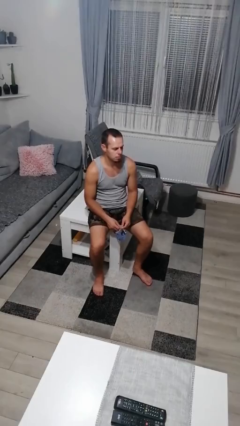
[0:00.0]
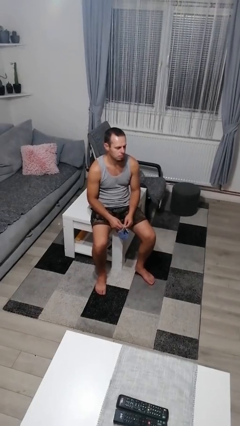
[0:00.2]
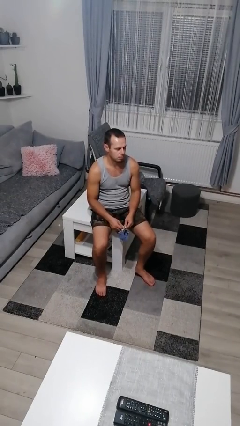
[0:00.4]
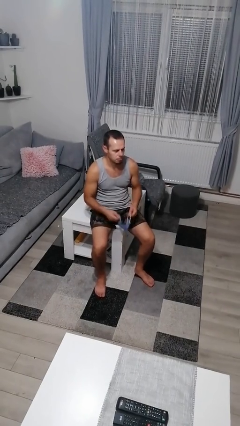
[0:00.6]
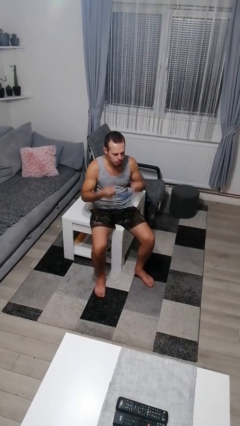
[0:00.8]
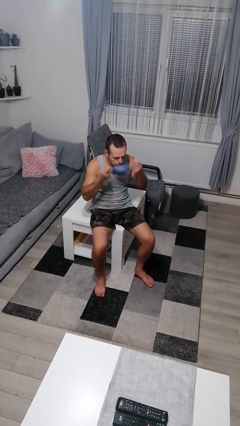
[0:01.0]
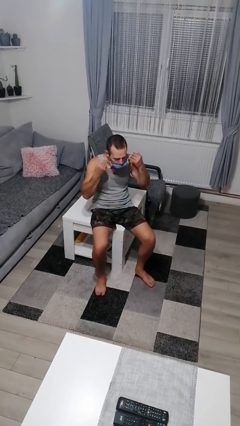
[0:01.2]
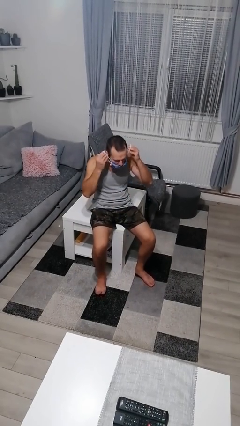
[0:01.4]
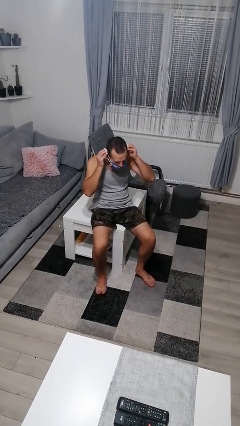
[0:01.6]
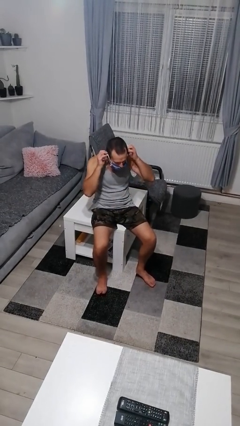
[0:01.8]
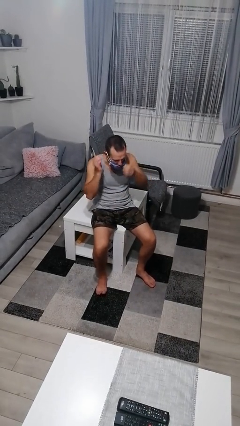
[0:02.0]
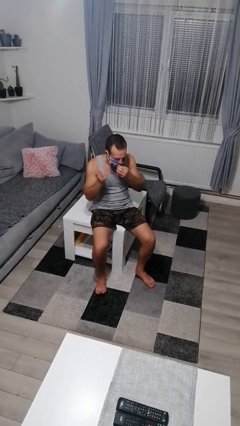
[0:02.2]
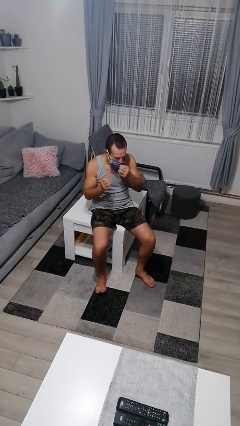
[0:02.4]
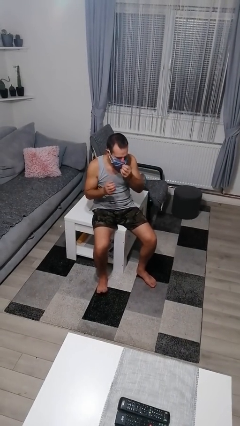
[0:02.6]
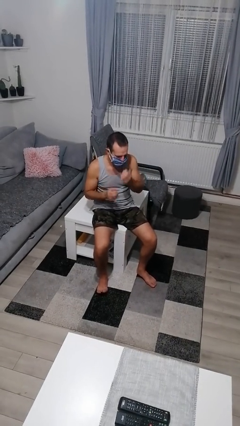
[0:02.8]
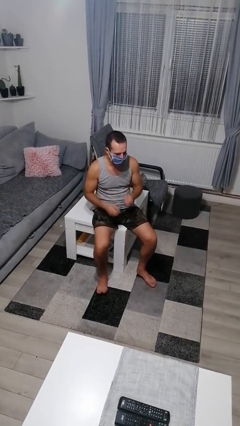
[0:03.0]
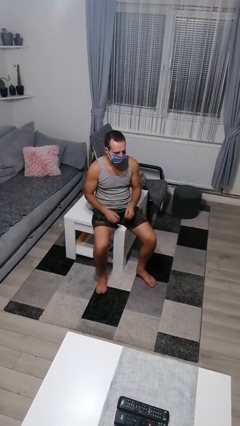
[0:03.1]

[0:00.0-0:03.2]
person puts on facemask

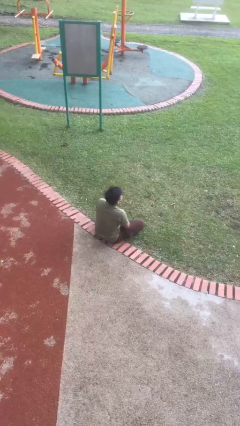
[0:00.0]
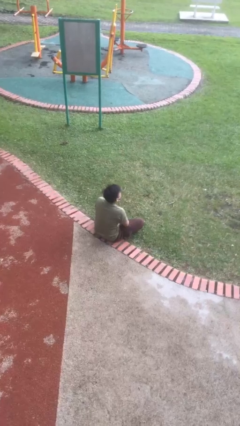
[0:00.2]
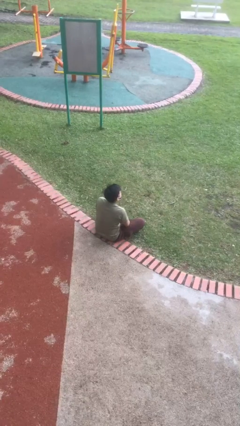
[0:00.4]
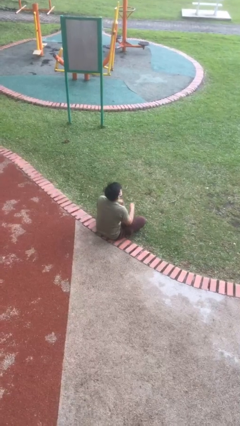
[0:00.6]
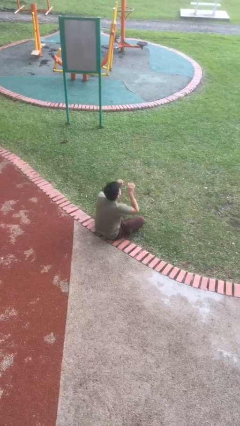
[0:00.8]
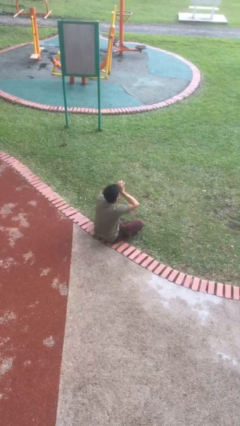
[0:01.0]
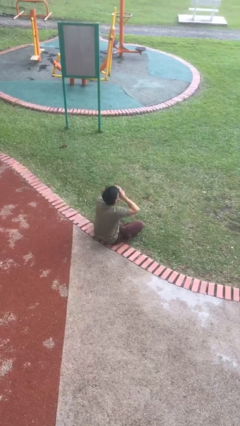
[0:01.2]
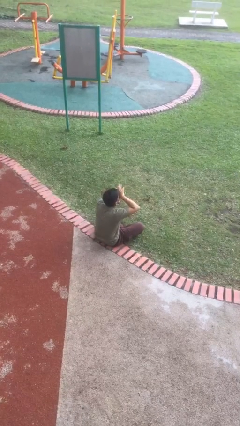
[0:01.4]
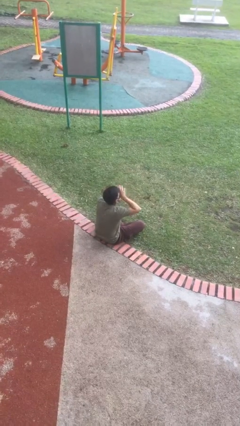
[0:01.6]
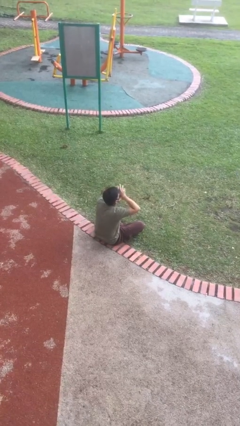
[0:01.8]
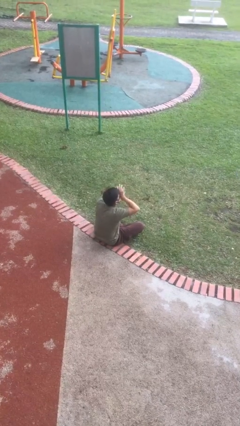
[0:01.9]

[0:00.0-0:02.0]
person rubs eyes

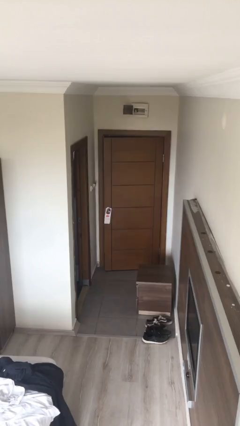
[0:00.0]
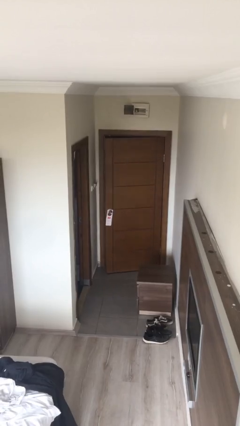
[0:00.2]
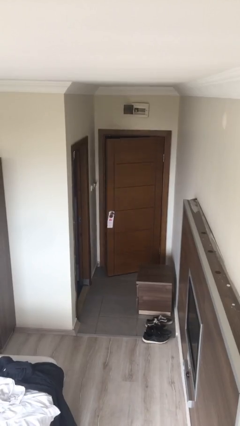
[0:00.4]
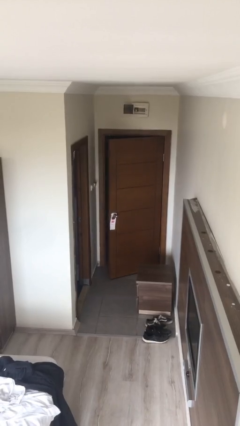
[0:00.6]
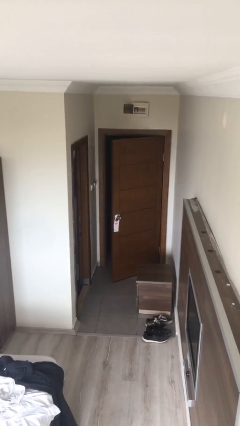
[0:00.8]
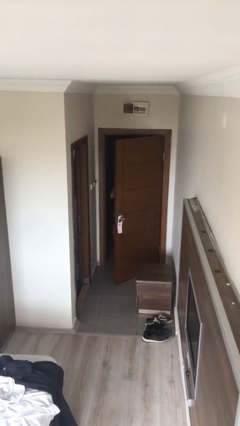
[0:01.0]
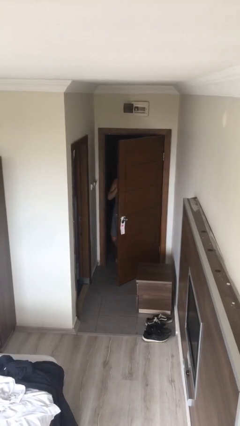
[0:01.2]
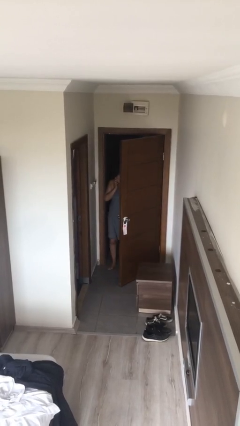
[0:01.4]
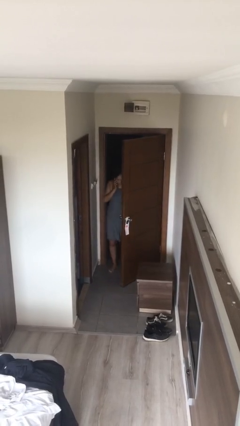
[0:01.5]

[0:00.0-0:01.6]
person opens facility door

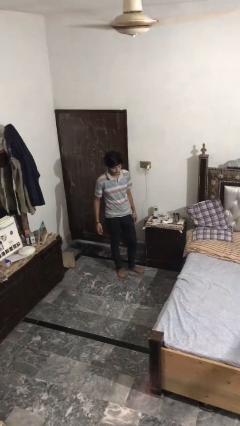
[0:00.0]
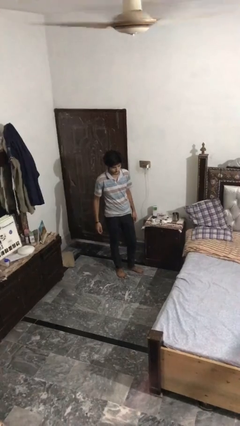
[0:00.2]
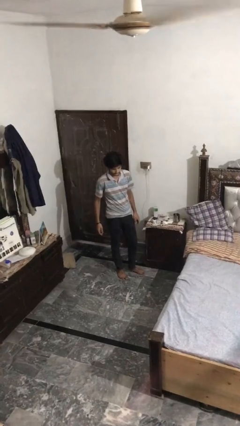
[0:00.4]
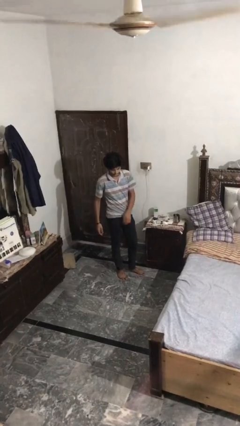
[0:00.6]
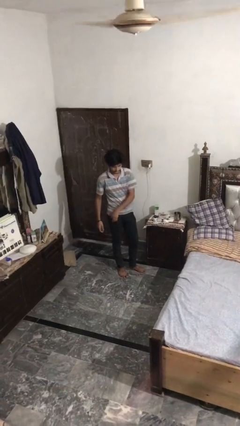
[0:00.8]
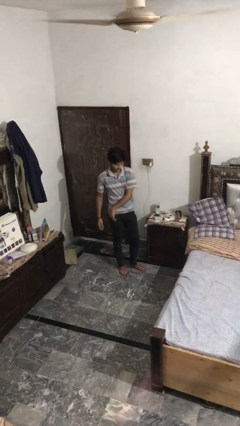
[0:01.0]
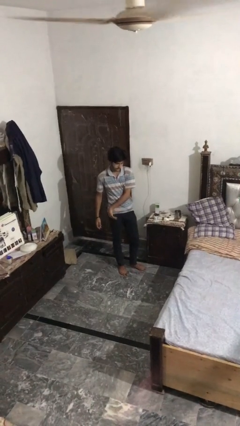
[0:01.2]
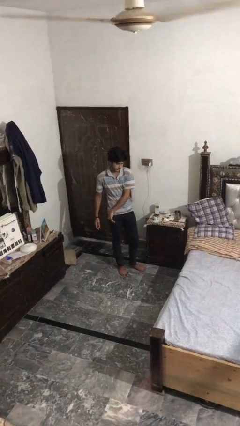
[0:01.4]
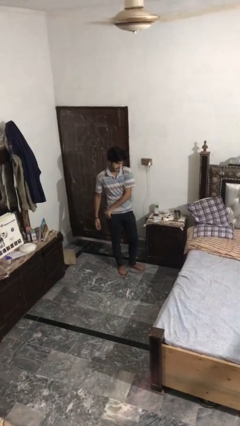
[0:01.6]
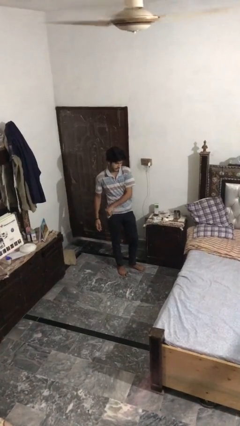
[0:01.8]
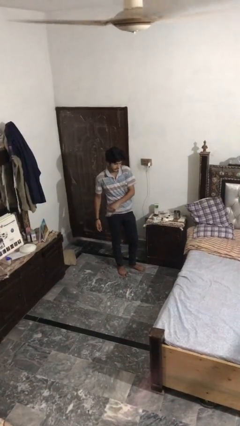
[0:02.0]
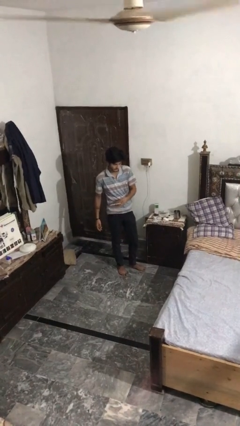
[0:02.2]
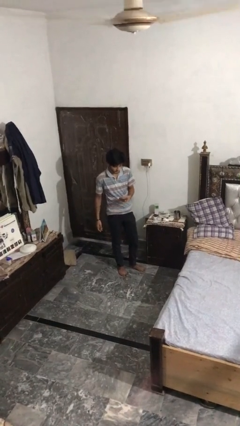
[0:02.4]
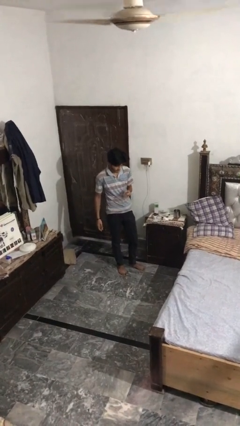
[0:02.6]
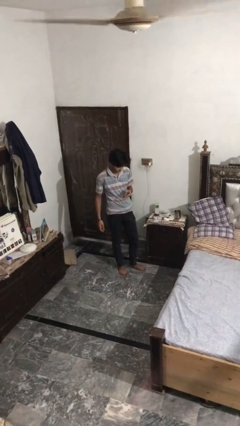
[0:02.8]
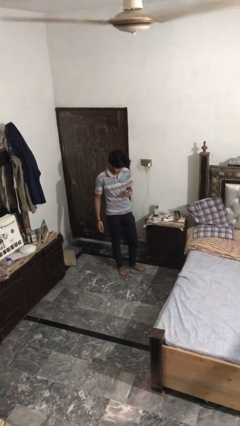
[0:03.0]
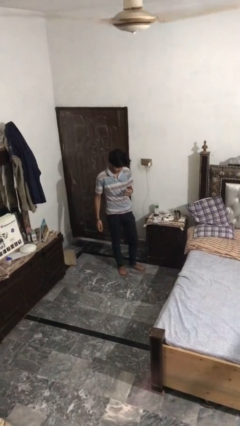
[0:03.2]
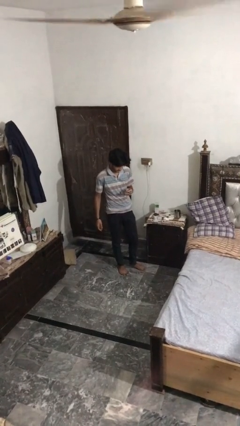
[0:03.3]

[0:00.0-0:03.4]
person takes phone from pocket

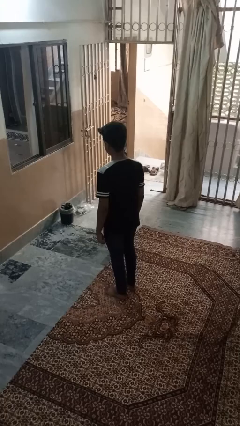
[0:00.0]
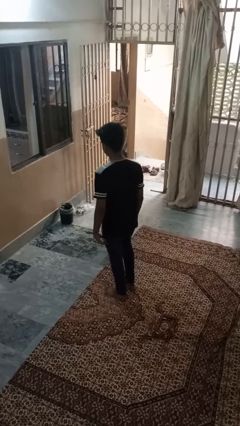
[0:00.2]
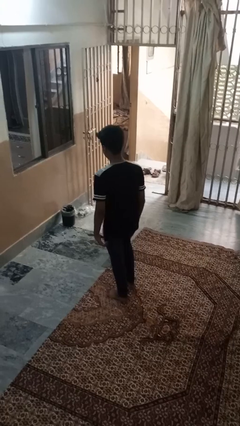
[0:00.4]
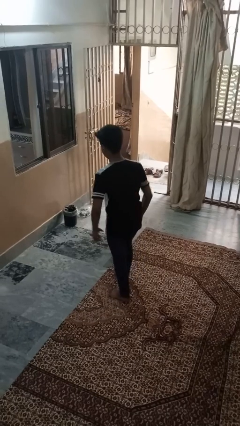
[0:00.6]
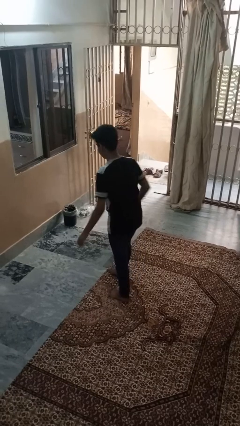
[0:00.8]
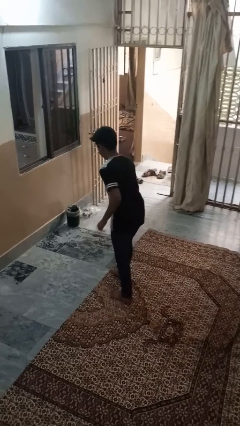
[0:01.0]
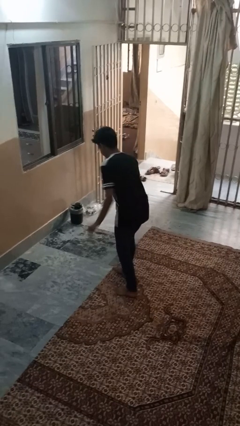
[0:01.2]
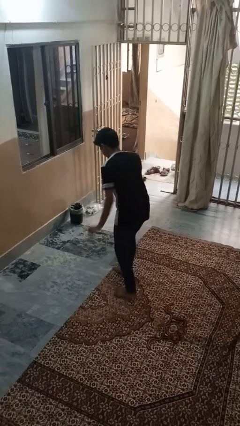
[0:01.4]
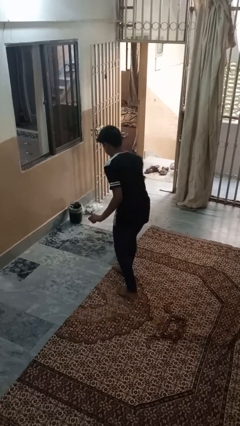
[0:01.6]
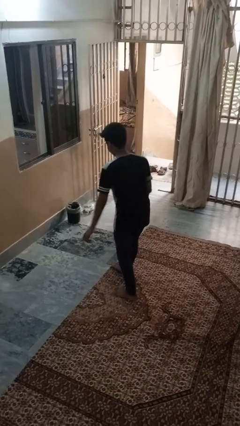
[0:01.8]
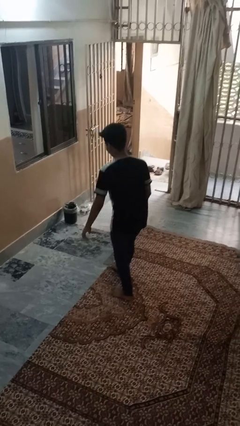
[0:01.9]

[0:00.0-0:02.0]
person dances in place

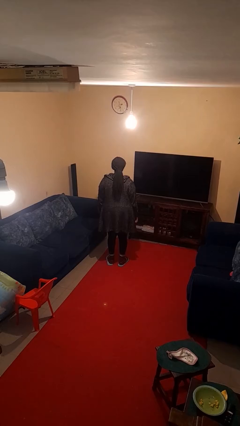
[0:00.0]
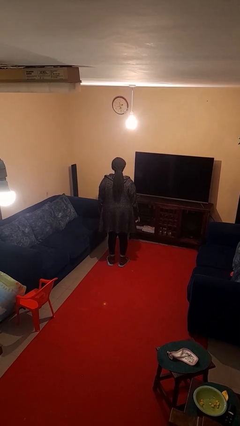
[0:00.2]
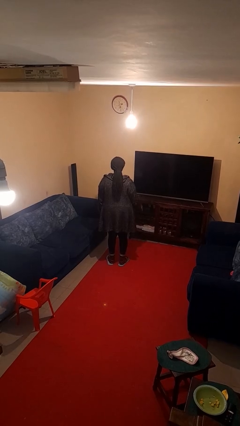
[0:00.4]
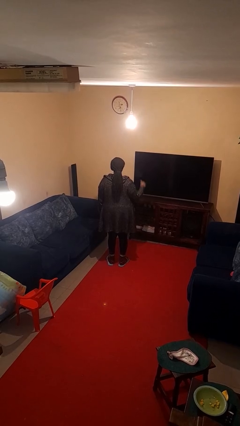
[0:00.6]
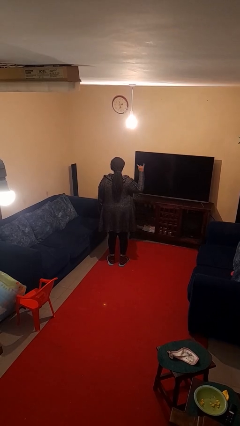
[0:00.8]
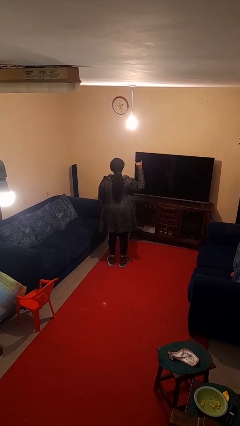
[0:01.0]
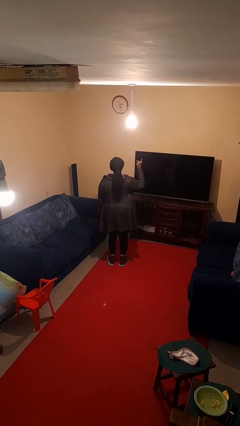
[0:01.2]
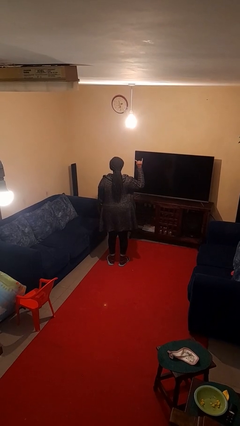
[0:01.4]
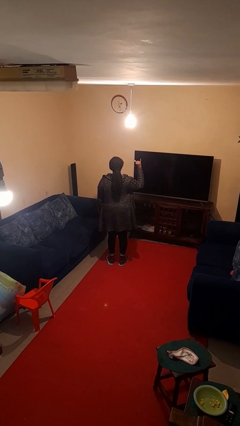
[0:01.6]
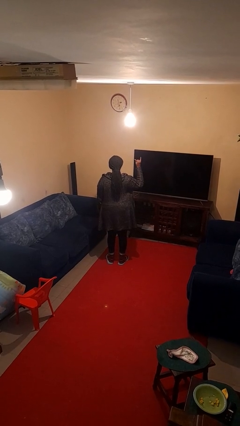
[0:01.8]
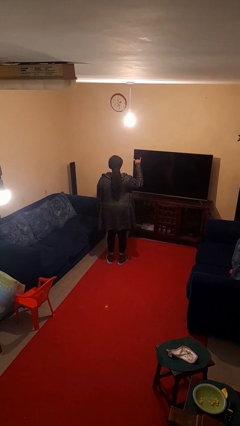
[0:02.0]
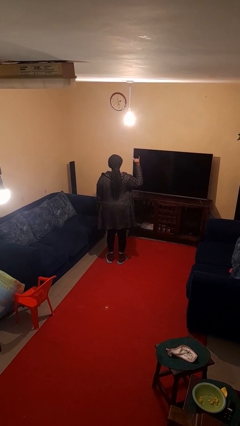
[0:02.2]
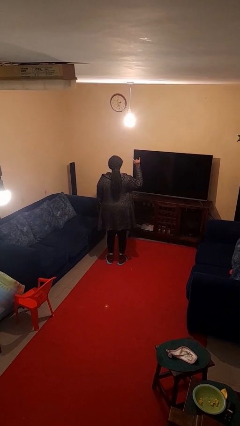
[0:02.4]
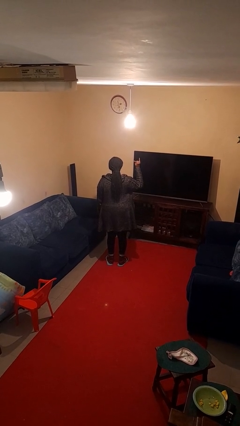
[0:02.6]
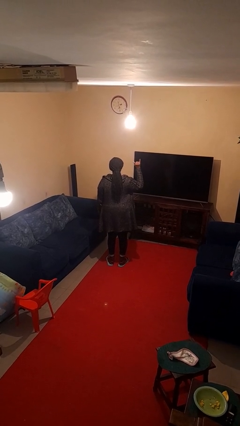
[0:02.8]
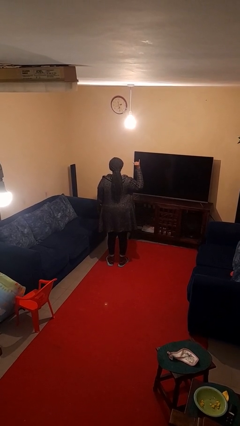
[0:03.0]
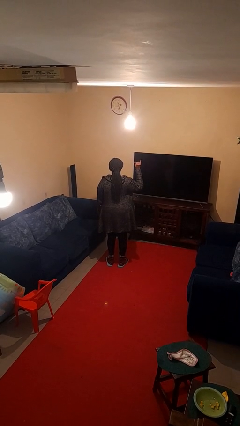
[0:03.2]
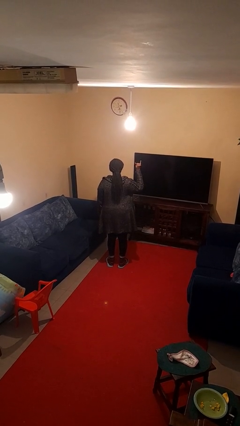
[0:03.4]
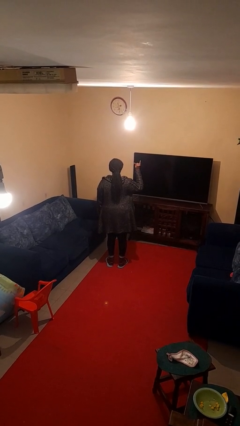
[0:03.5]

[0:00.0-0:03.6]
person gestures hang loose

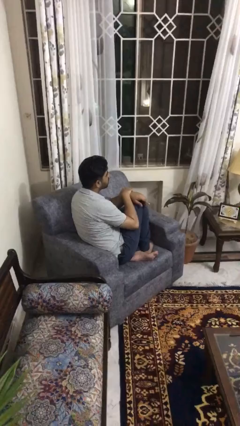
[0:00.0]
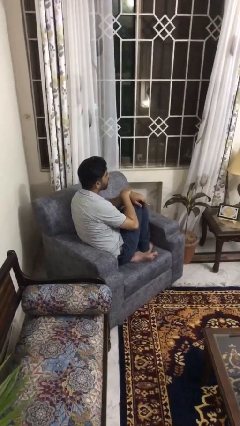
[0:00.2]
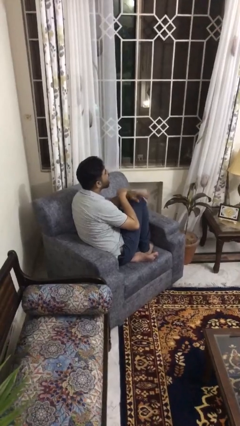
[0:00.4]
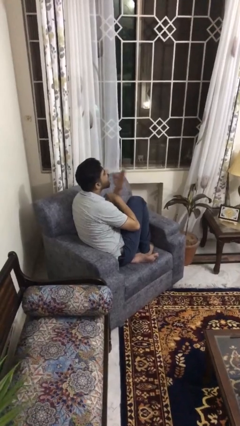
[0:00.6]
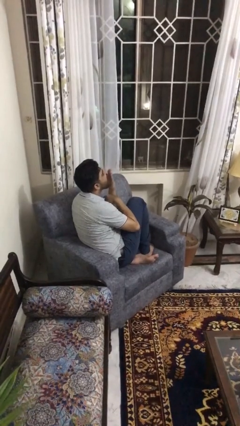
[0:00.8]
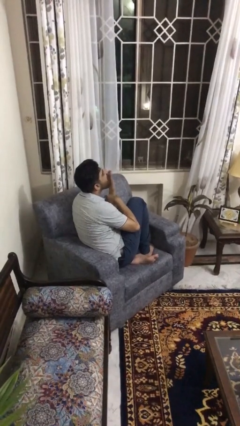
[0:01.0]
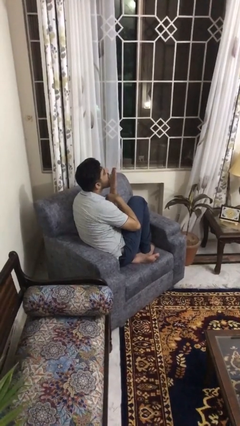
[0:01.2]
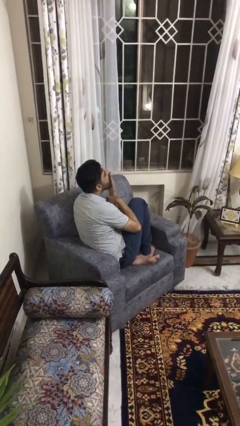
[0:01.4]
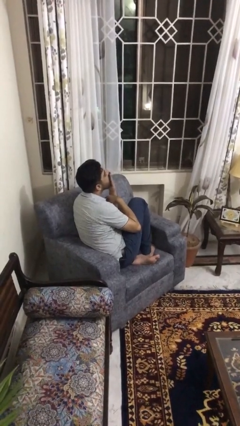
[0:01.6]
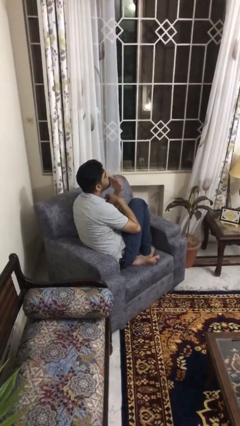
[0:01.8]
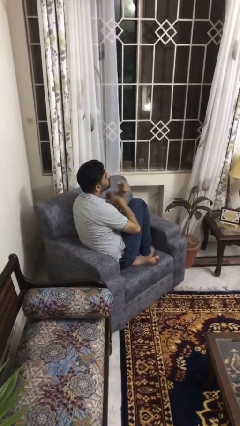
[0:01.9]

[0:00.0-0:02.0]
person yawns
